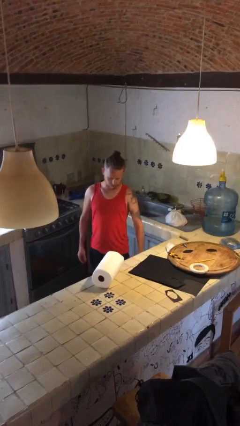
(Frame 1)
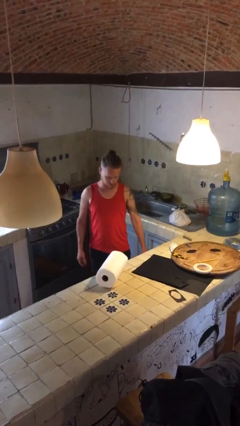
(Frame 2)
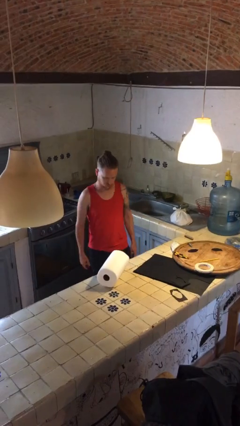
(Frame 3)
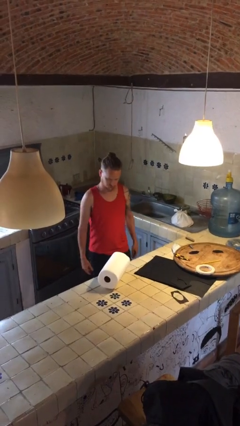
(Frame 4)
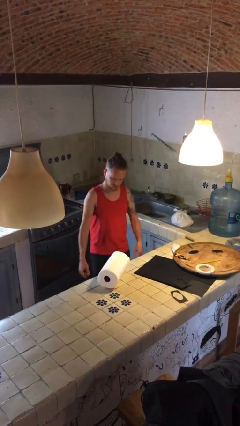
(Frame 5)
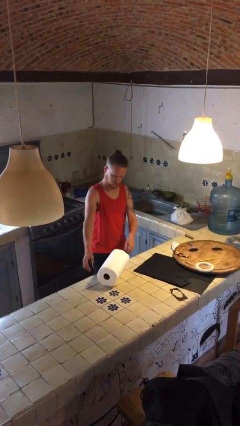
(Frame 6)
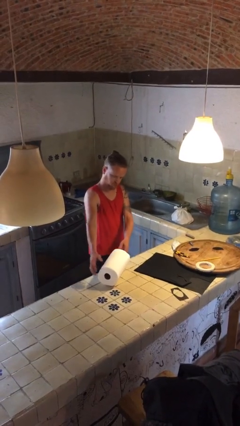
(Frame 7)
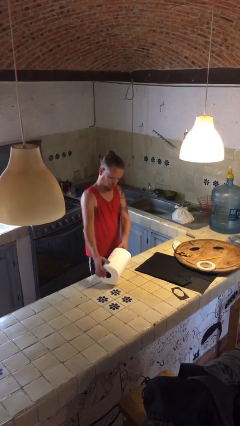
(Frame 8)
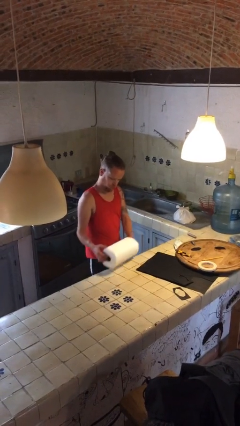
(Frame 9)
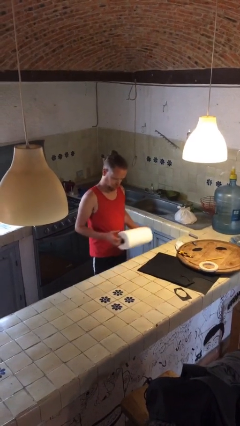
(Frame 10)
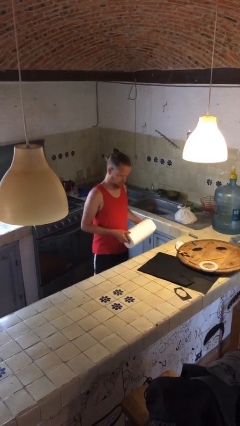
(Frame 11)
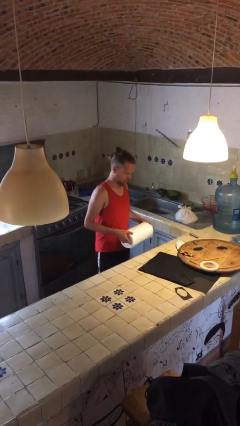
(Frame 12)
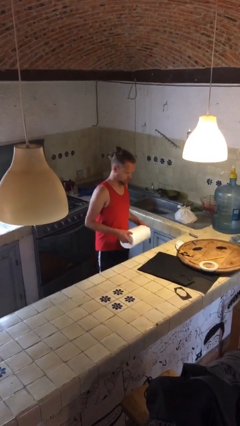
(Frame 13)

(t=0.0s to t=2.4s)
person picks up object from countertop

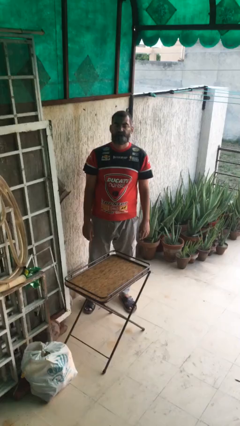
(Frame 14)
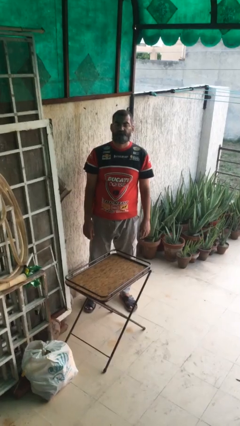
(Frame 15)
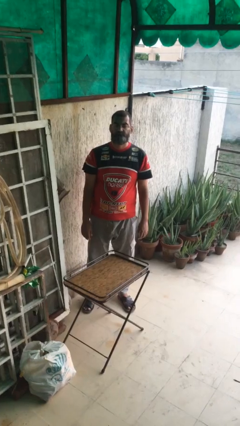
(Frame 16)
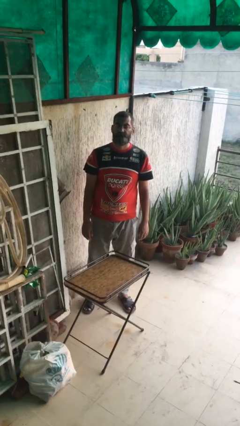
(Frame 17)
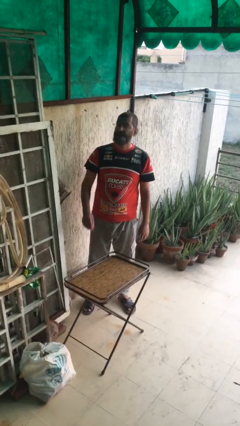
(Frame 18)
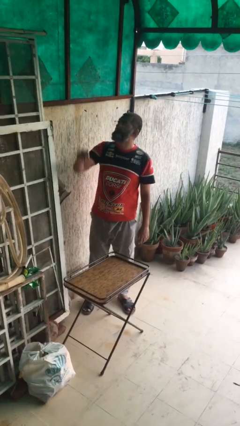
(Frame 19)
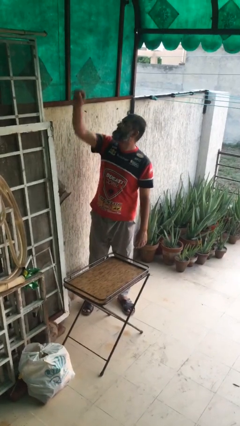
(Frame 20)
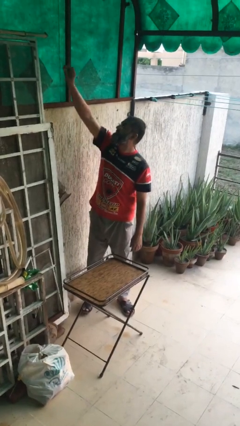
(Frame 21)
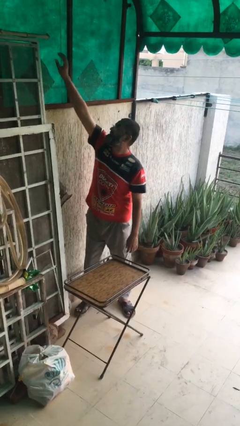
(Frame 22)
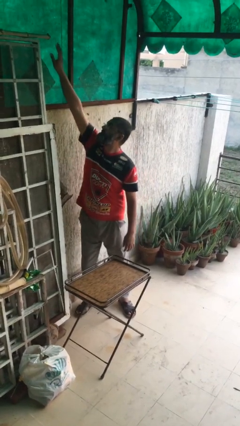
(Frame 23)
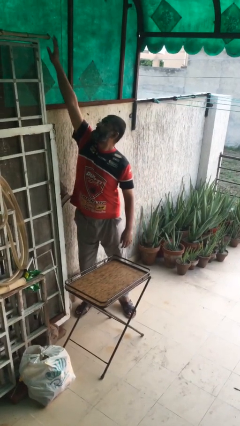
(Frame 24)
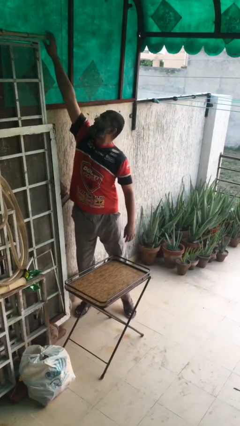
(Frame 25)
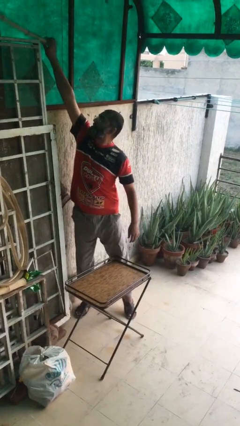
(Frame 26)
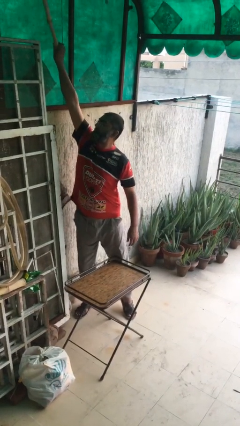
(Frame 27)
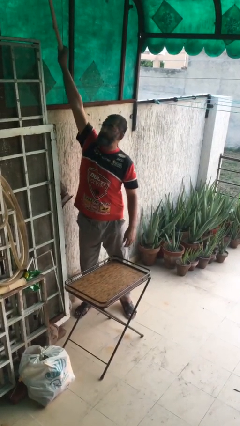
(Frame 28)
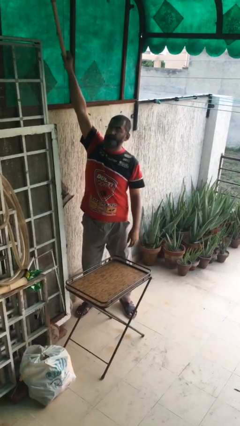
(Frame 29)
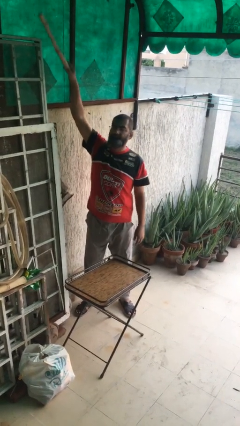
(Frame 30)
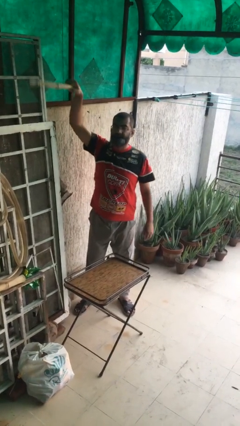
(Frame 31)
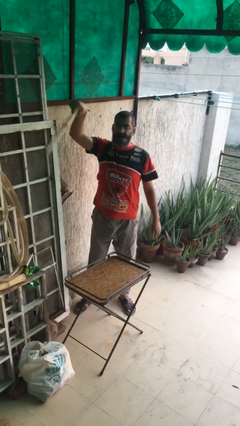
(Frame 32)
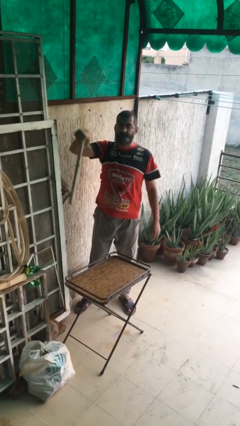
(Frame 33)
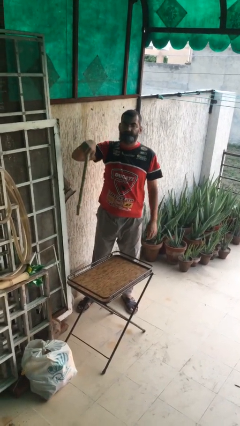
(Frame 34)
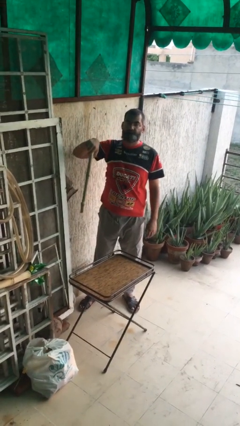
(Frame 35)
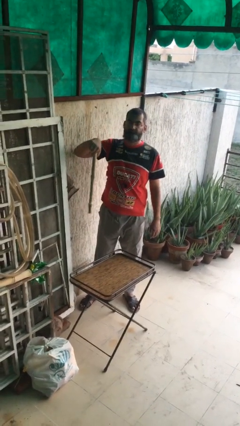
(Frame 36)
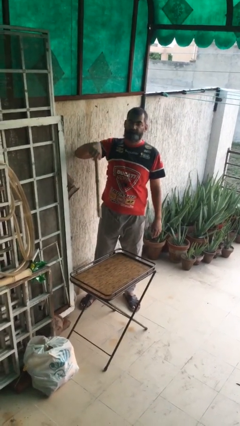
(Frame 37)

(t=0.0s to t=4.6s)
person picks up object from shelf

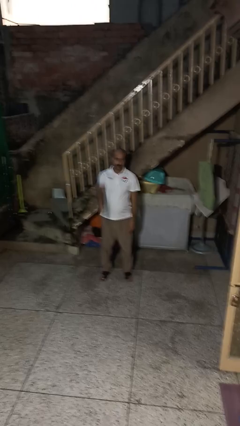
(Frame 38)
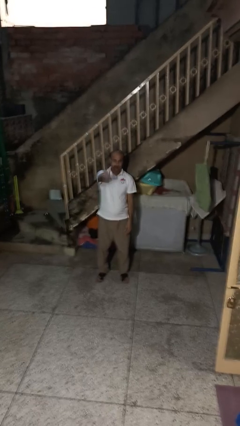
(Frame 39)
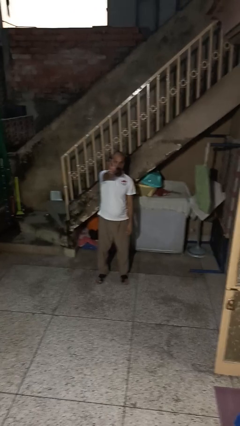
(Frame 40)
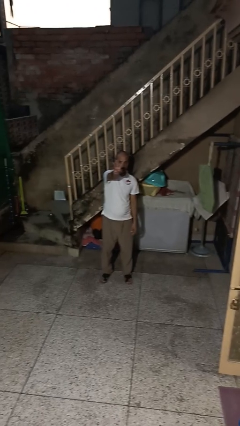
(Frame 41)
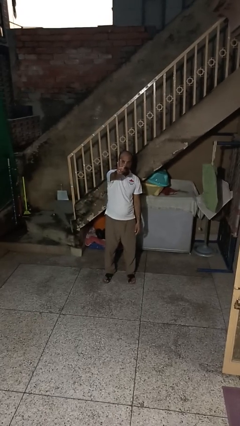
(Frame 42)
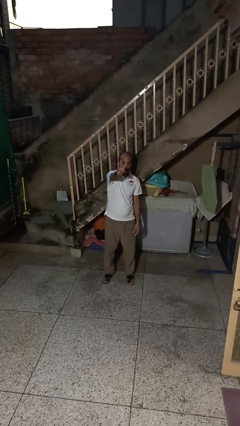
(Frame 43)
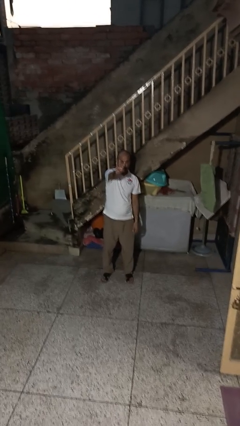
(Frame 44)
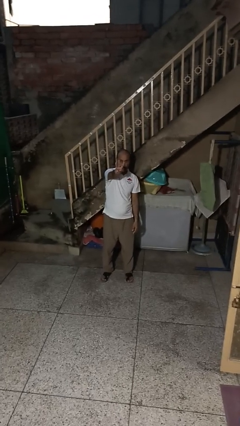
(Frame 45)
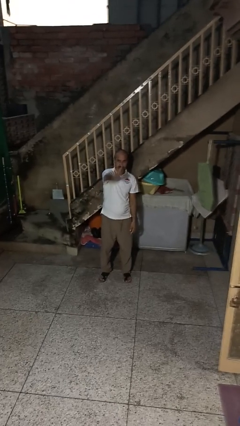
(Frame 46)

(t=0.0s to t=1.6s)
person gestures number three

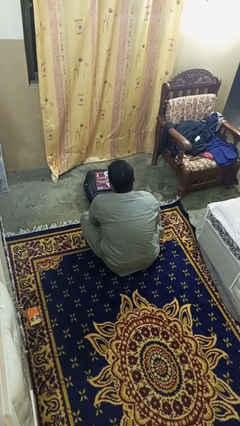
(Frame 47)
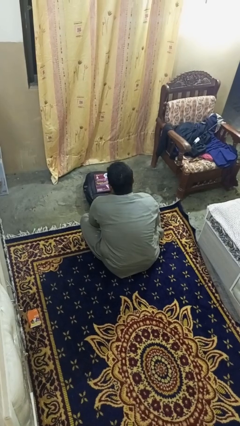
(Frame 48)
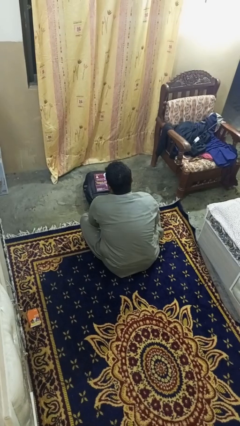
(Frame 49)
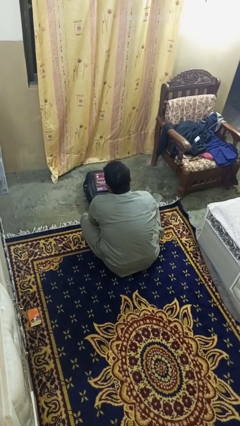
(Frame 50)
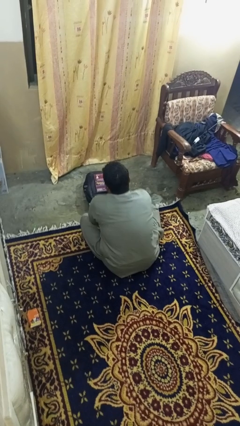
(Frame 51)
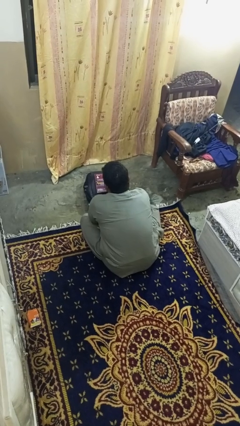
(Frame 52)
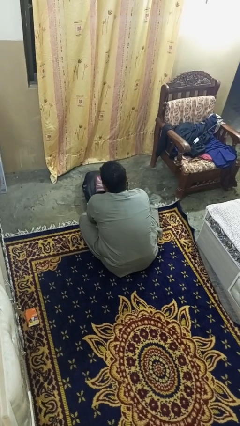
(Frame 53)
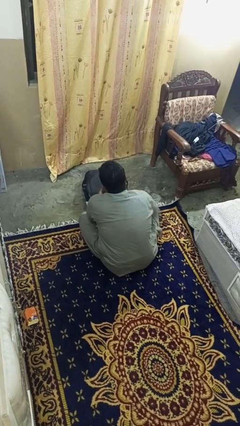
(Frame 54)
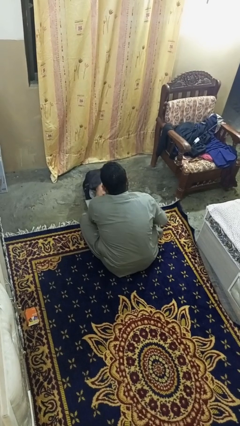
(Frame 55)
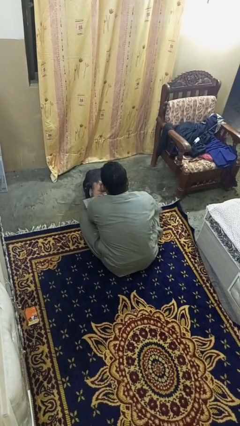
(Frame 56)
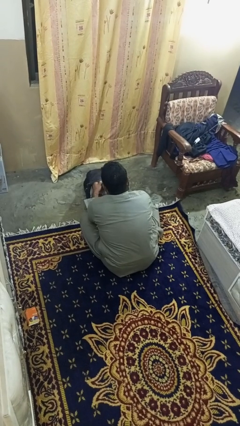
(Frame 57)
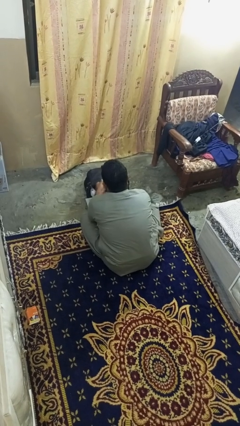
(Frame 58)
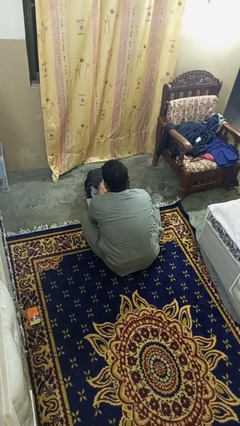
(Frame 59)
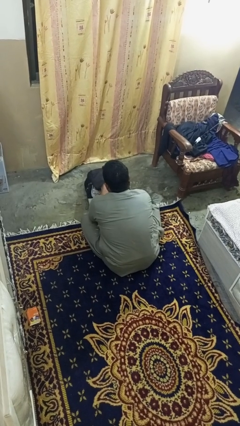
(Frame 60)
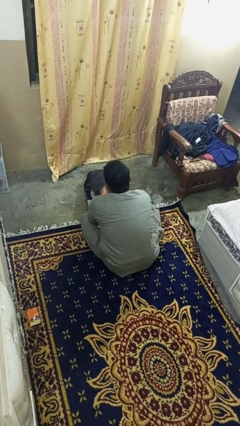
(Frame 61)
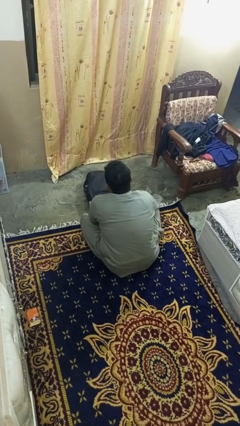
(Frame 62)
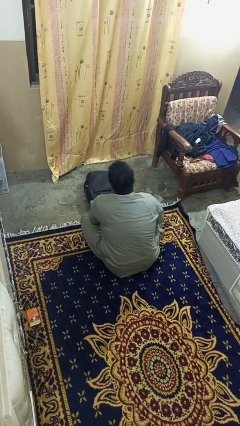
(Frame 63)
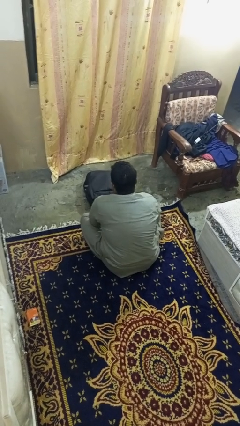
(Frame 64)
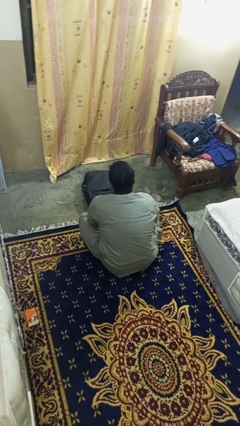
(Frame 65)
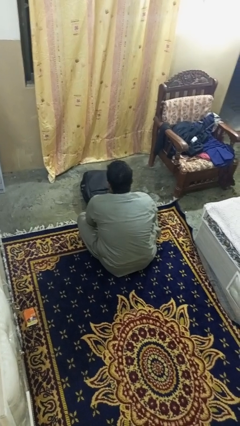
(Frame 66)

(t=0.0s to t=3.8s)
person puts object into bag

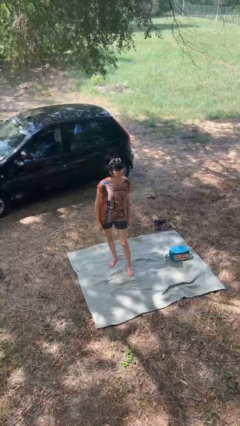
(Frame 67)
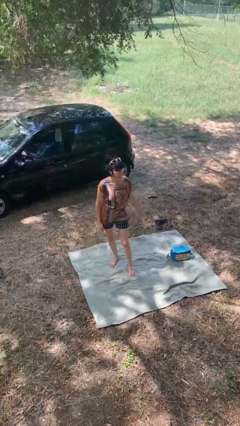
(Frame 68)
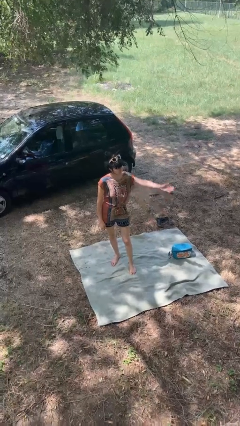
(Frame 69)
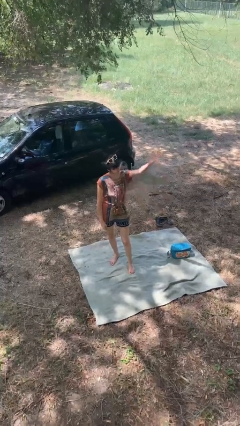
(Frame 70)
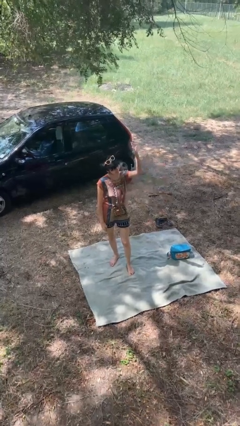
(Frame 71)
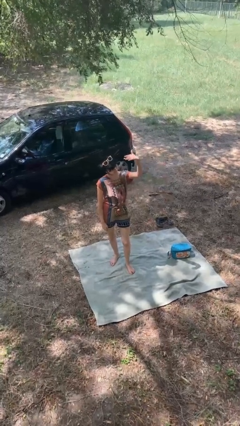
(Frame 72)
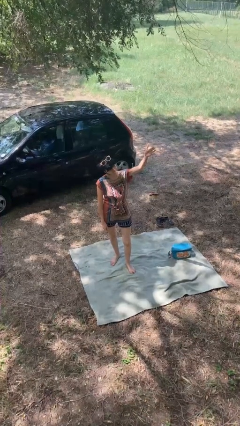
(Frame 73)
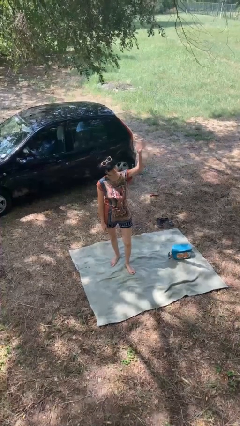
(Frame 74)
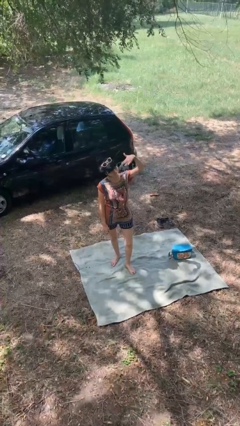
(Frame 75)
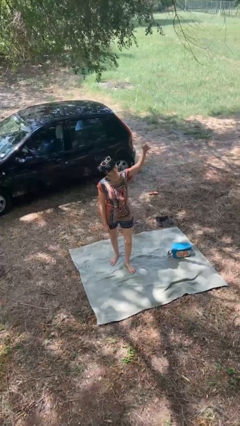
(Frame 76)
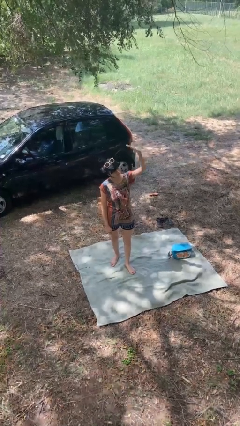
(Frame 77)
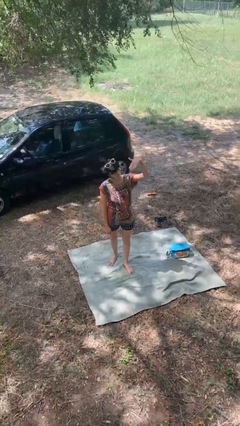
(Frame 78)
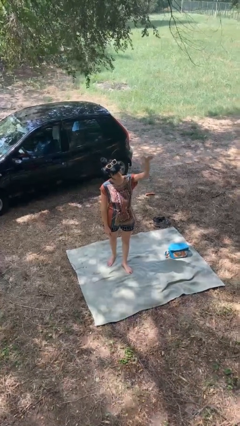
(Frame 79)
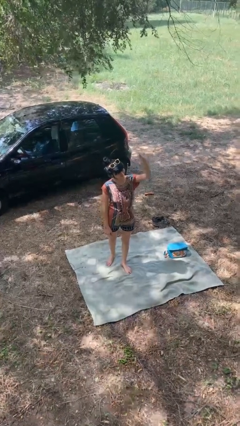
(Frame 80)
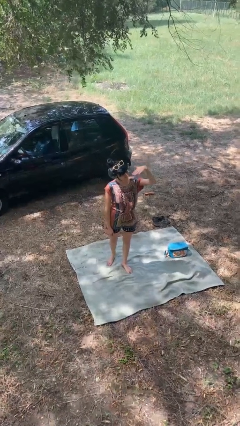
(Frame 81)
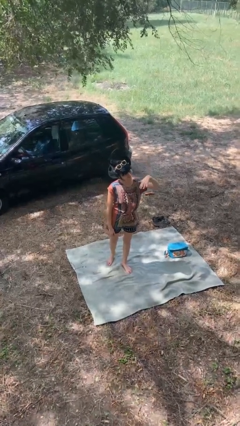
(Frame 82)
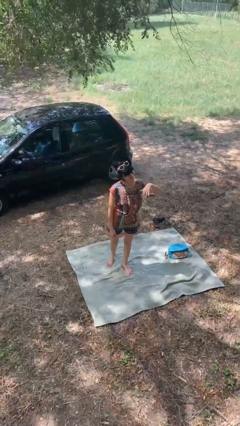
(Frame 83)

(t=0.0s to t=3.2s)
person gestures come here

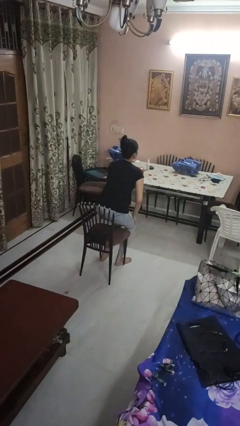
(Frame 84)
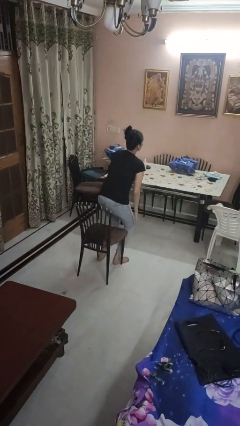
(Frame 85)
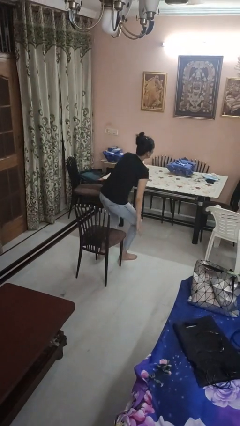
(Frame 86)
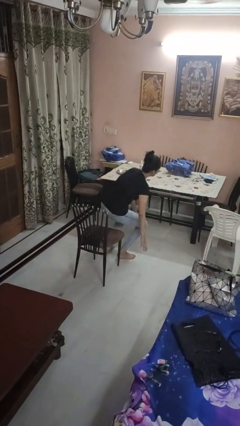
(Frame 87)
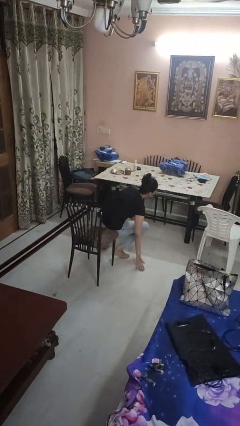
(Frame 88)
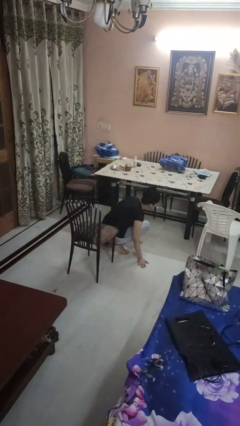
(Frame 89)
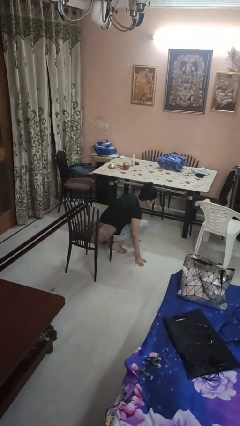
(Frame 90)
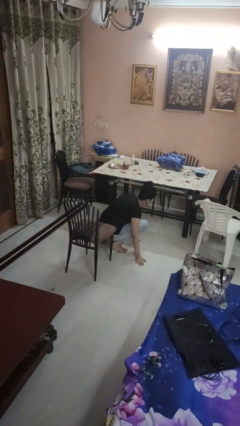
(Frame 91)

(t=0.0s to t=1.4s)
person falls from chair
